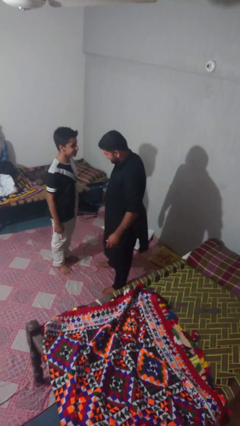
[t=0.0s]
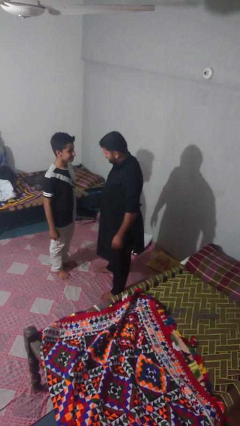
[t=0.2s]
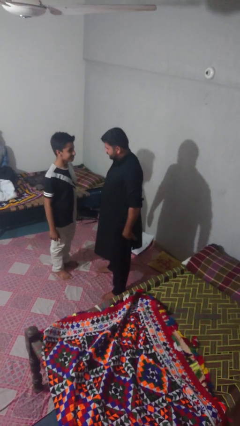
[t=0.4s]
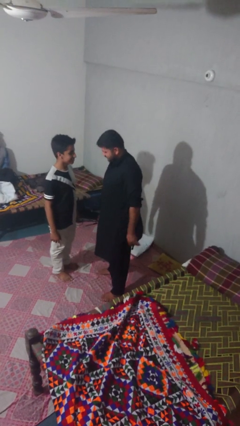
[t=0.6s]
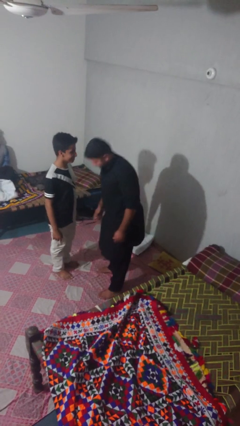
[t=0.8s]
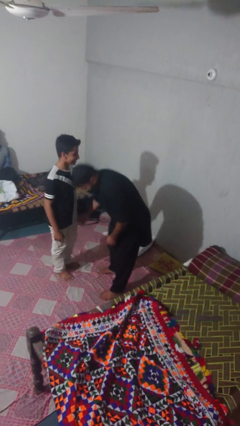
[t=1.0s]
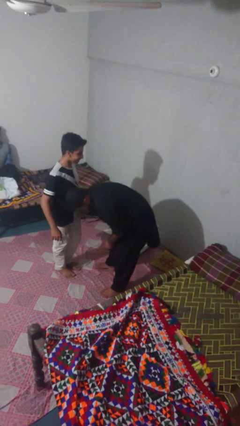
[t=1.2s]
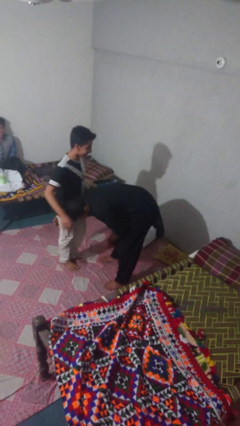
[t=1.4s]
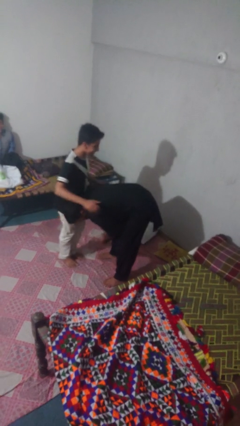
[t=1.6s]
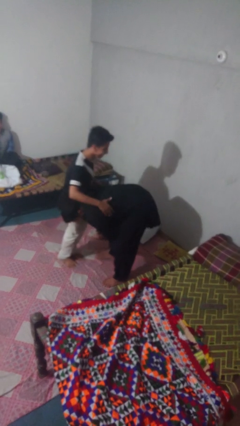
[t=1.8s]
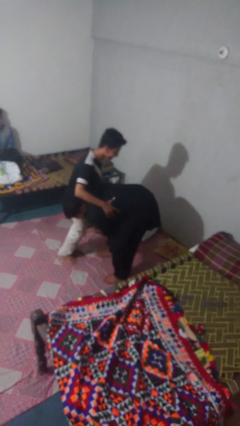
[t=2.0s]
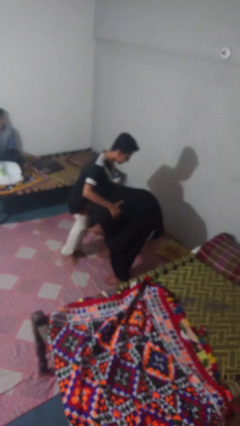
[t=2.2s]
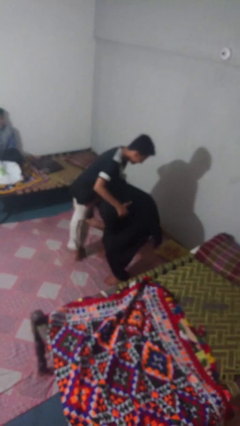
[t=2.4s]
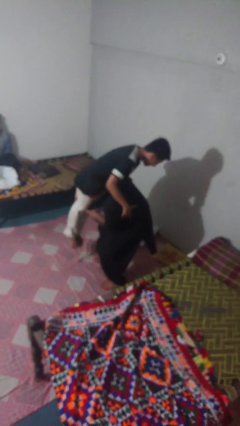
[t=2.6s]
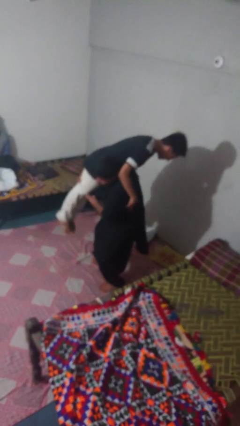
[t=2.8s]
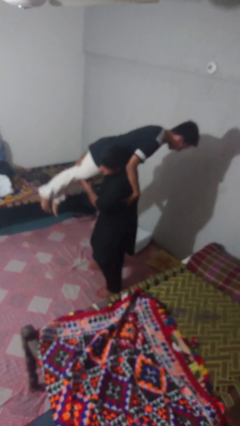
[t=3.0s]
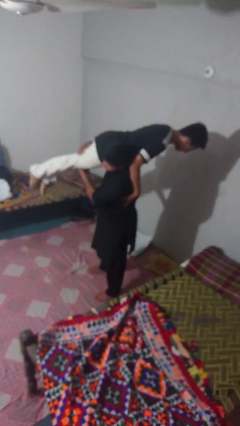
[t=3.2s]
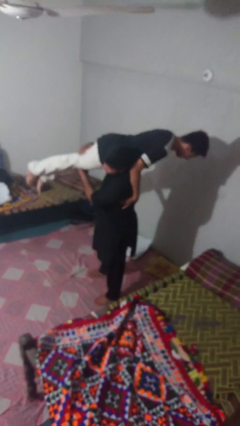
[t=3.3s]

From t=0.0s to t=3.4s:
person carries person over shoulder

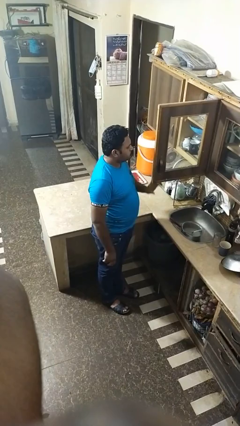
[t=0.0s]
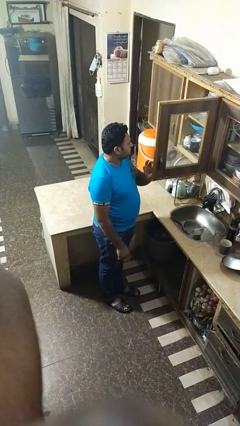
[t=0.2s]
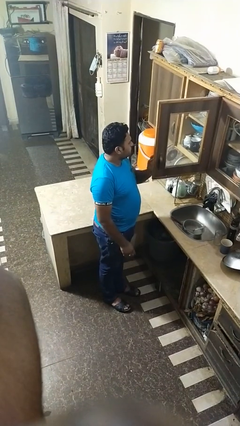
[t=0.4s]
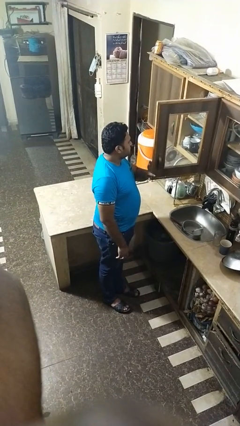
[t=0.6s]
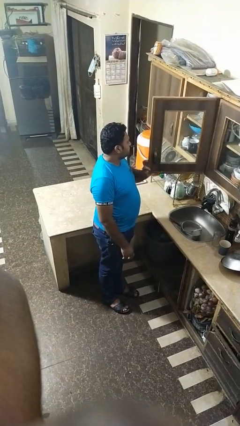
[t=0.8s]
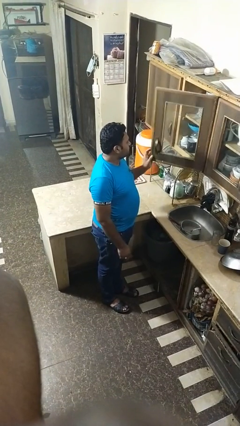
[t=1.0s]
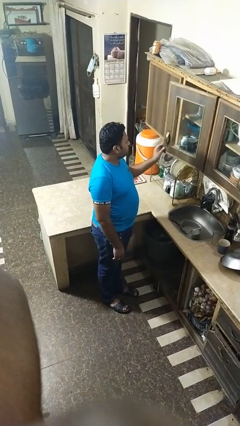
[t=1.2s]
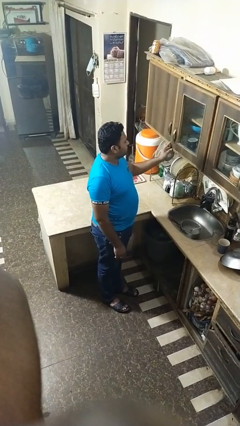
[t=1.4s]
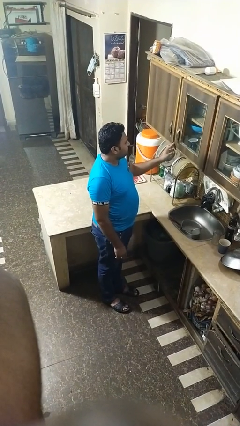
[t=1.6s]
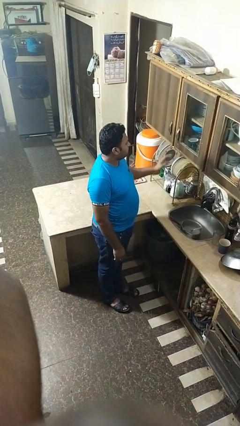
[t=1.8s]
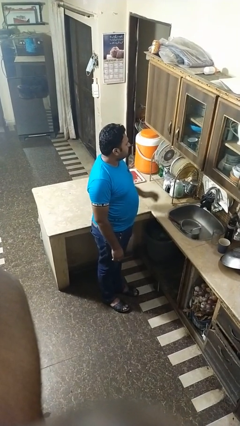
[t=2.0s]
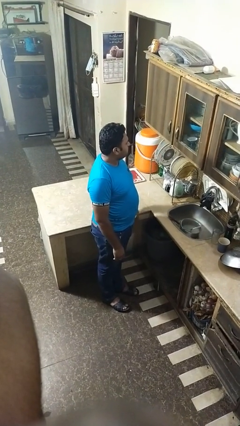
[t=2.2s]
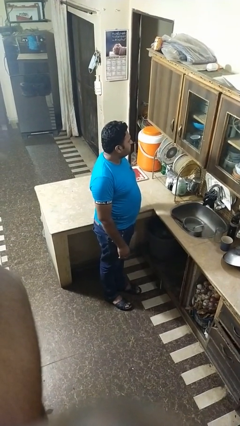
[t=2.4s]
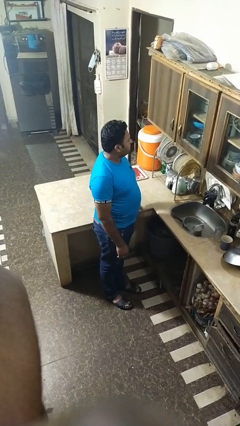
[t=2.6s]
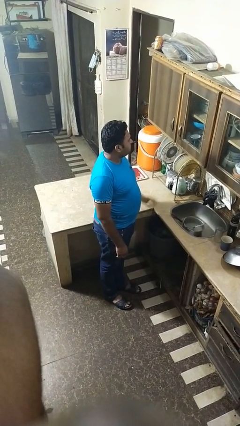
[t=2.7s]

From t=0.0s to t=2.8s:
person closes cabinet

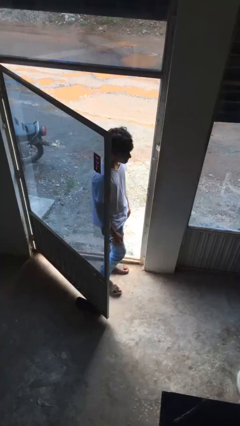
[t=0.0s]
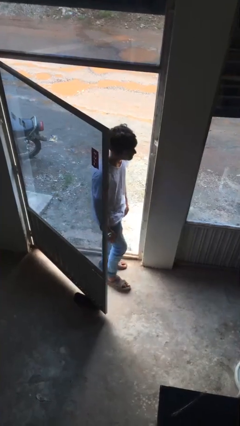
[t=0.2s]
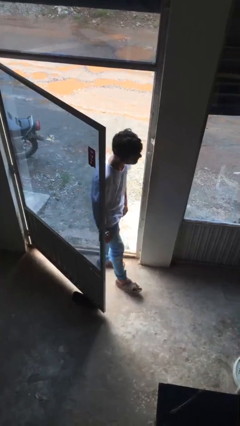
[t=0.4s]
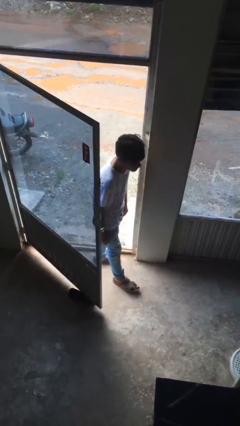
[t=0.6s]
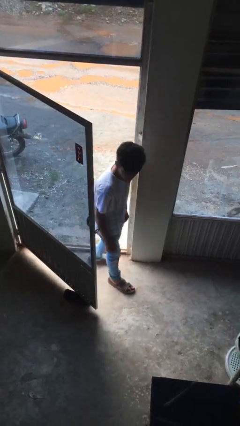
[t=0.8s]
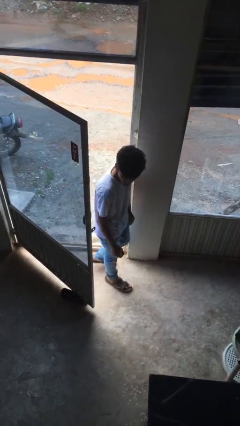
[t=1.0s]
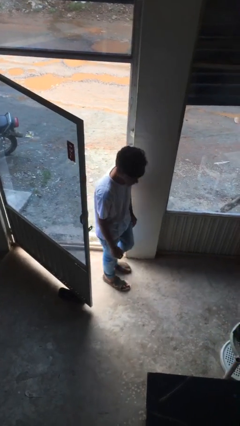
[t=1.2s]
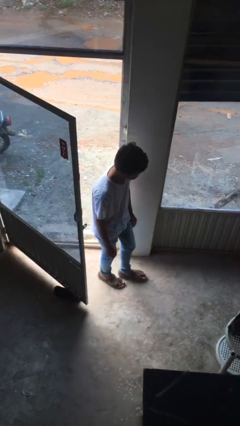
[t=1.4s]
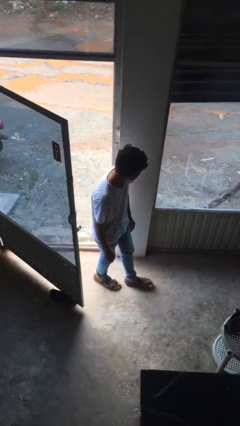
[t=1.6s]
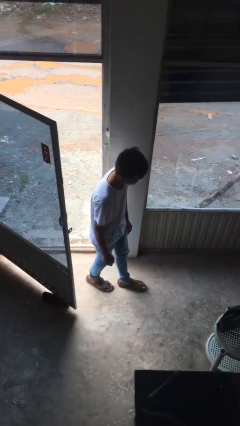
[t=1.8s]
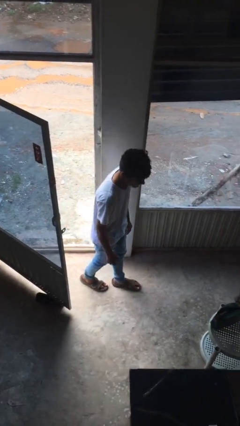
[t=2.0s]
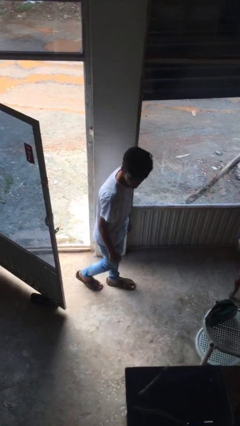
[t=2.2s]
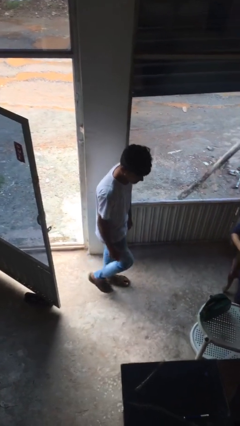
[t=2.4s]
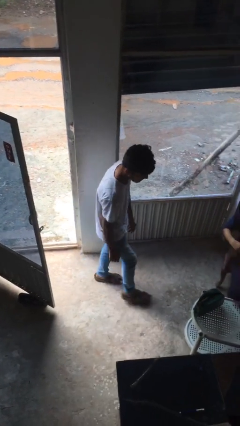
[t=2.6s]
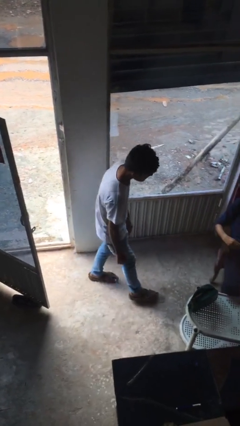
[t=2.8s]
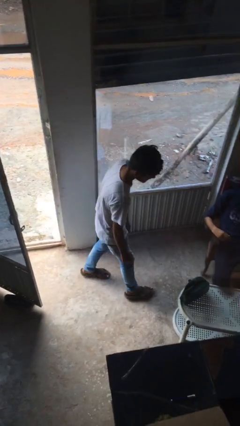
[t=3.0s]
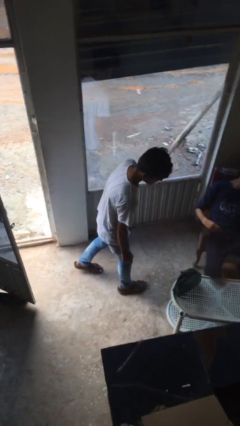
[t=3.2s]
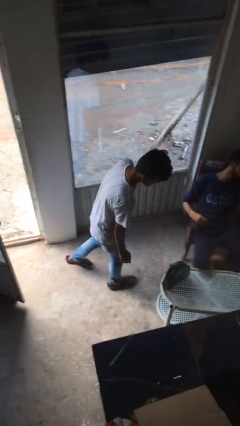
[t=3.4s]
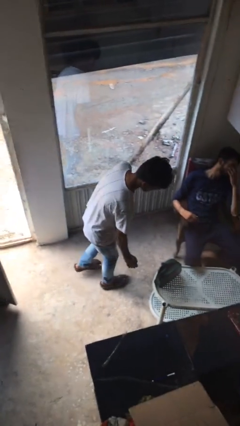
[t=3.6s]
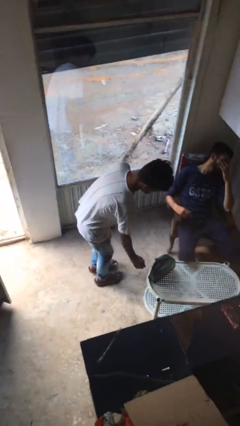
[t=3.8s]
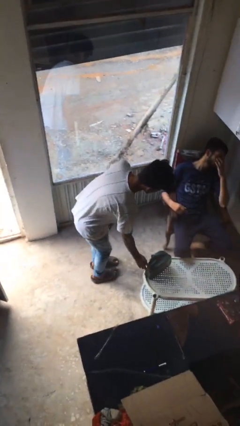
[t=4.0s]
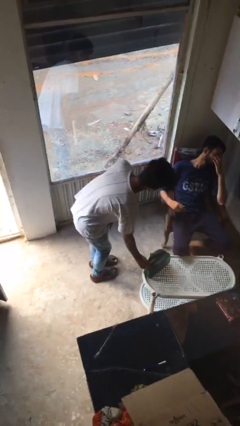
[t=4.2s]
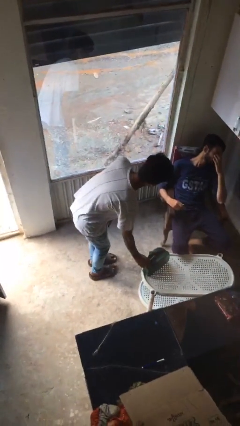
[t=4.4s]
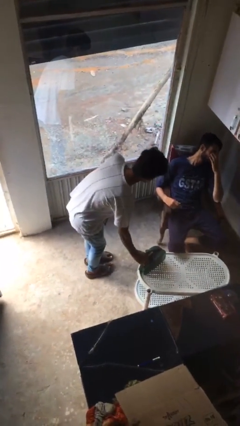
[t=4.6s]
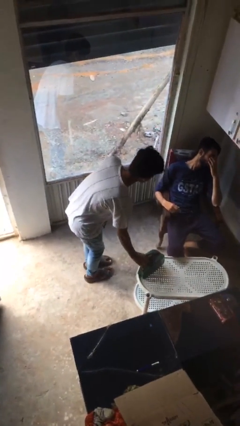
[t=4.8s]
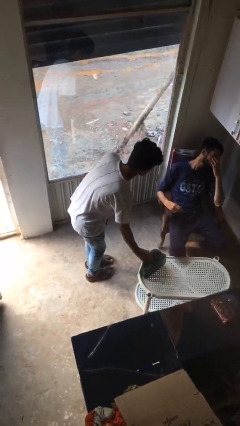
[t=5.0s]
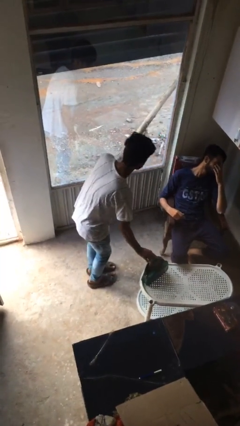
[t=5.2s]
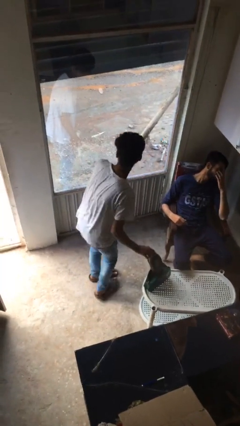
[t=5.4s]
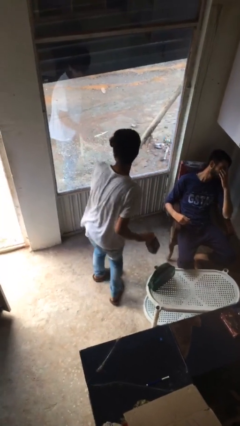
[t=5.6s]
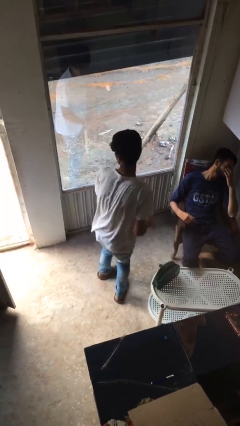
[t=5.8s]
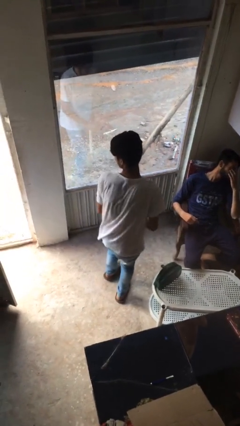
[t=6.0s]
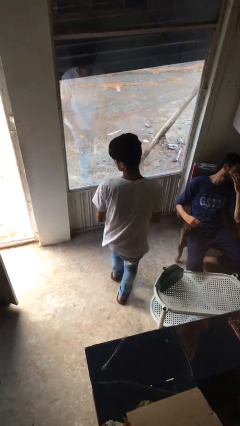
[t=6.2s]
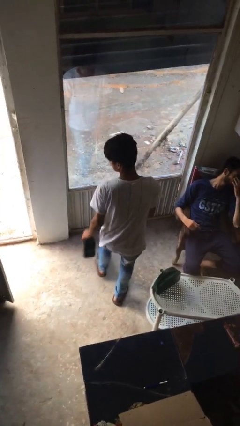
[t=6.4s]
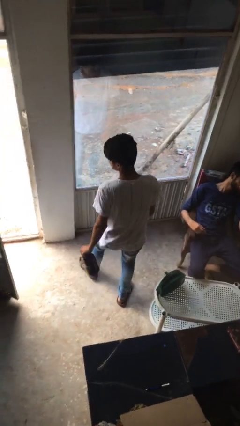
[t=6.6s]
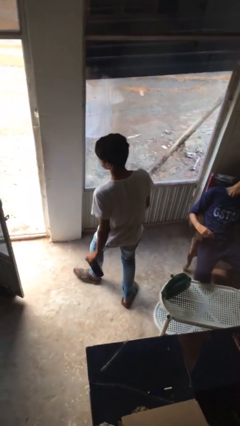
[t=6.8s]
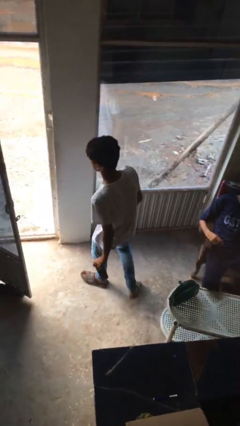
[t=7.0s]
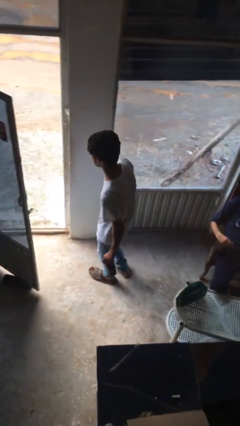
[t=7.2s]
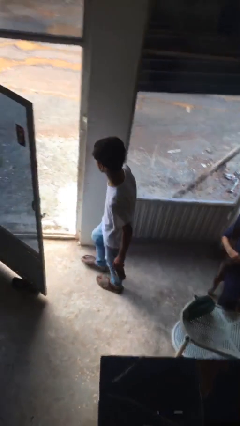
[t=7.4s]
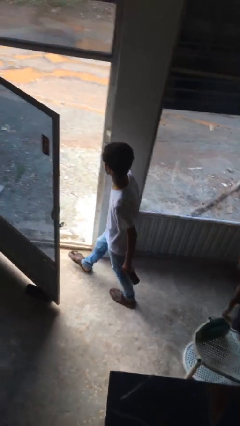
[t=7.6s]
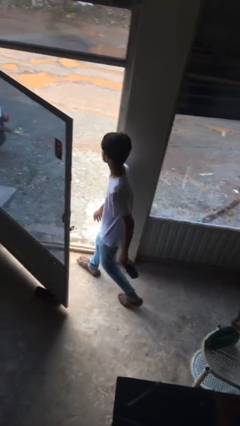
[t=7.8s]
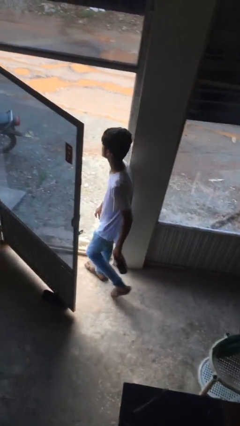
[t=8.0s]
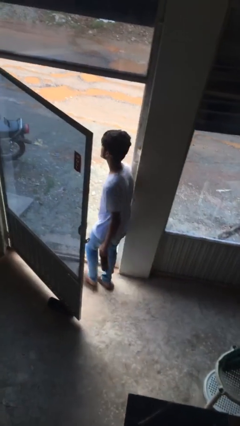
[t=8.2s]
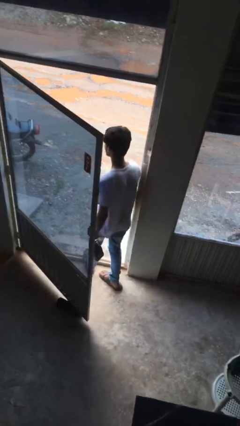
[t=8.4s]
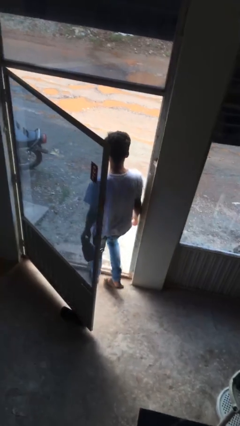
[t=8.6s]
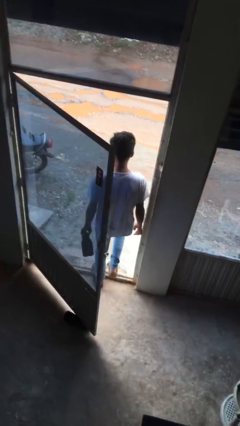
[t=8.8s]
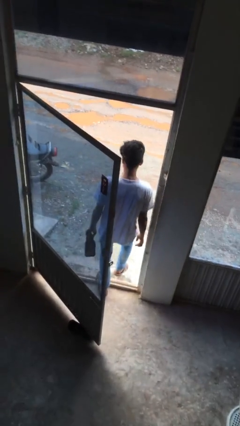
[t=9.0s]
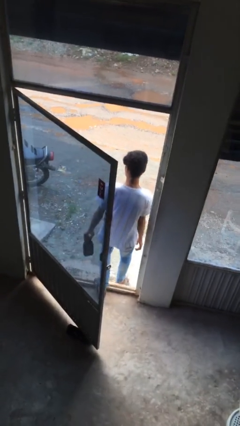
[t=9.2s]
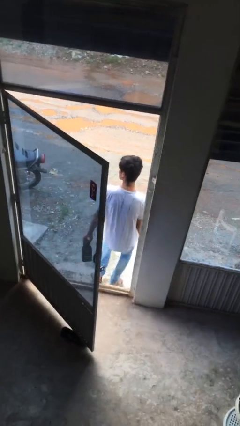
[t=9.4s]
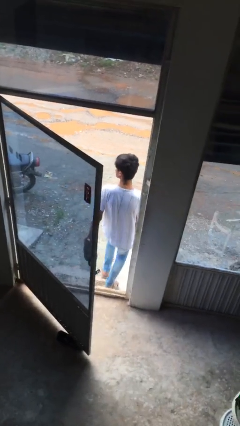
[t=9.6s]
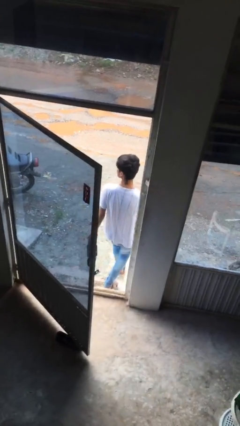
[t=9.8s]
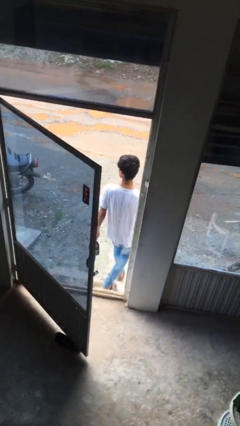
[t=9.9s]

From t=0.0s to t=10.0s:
person steals object from person

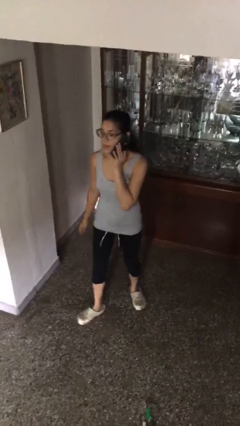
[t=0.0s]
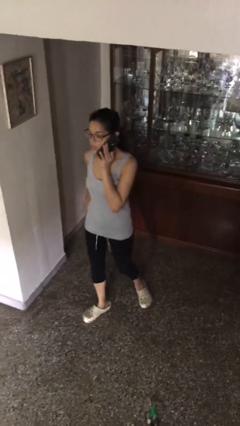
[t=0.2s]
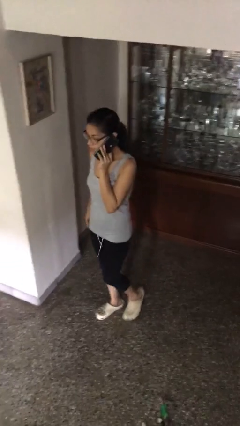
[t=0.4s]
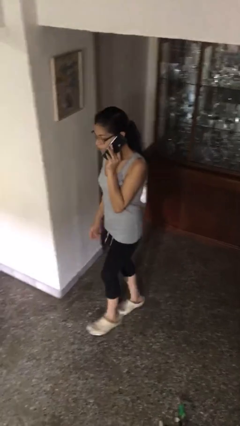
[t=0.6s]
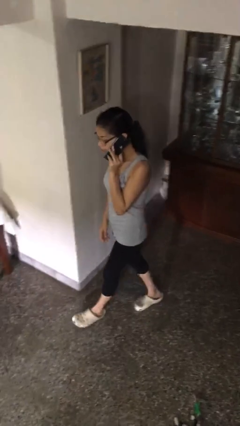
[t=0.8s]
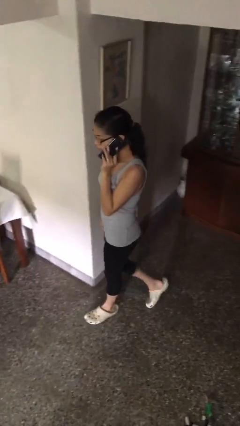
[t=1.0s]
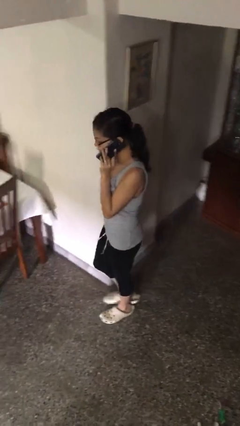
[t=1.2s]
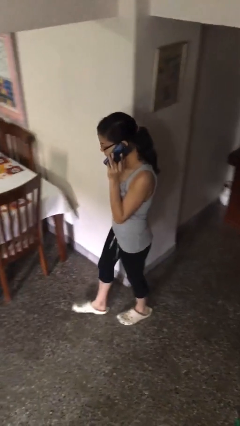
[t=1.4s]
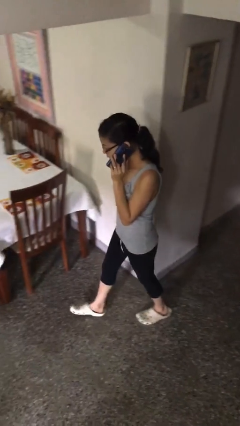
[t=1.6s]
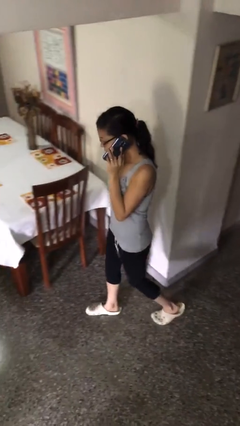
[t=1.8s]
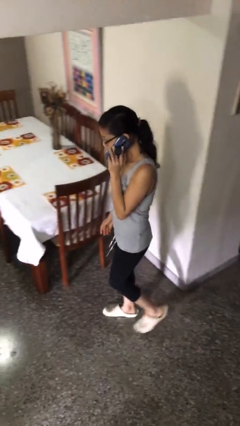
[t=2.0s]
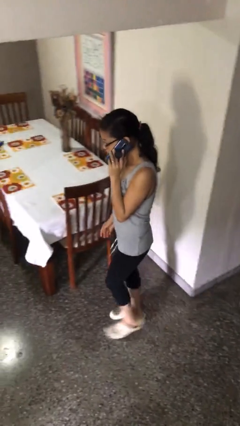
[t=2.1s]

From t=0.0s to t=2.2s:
person talks on phone
